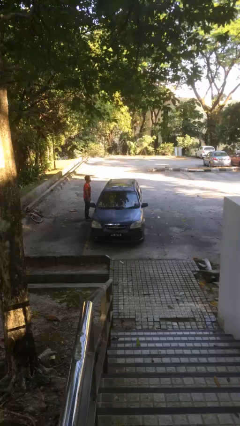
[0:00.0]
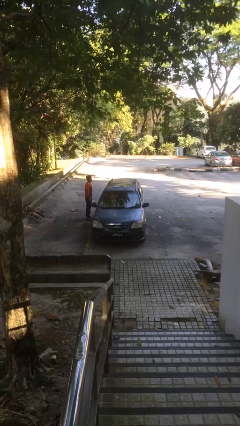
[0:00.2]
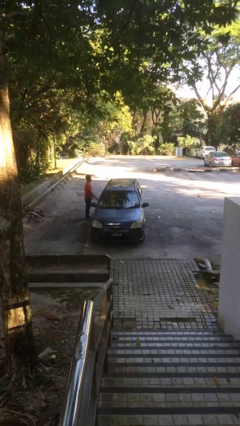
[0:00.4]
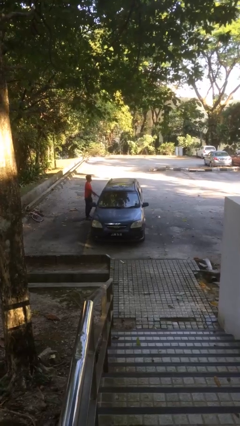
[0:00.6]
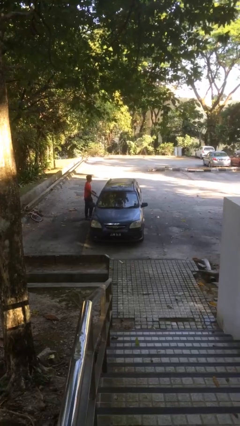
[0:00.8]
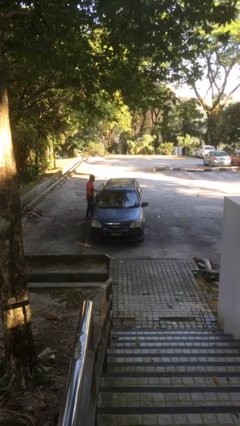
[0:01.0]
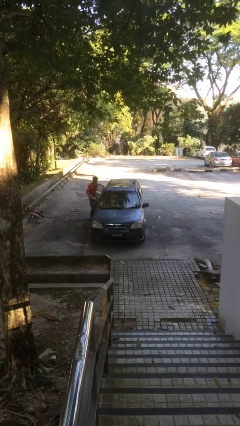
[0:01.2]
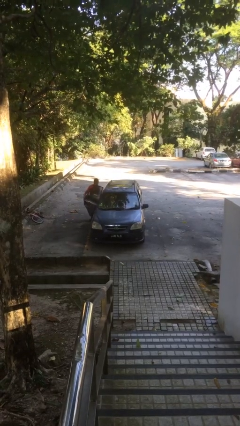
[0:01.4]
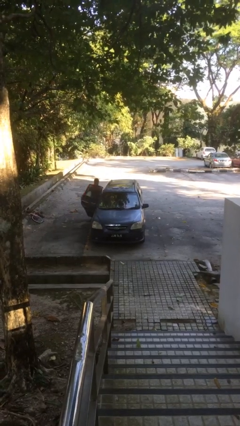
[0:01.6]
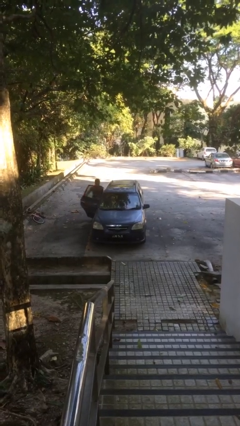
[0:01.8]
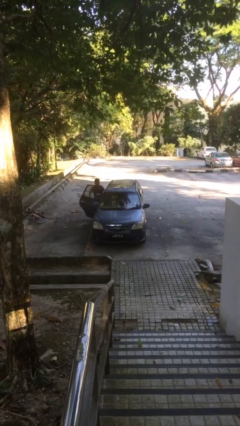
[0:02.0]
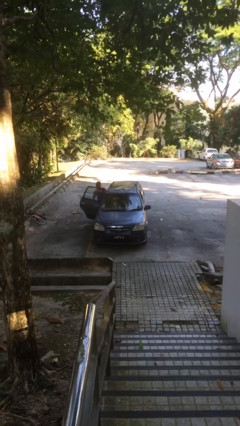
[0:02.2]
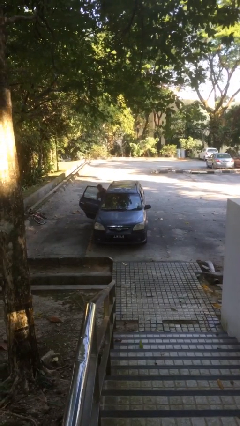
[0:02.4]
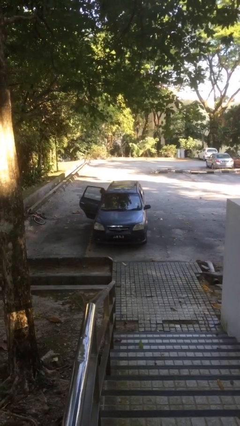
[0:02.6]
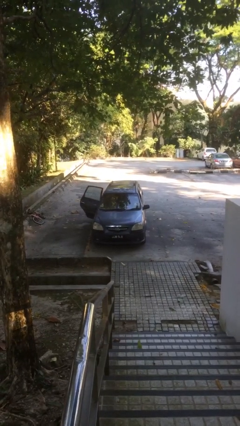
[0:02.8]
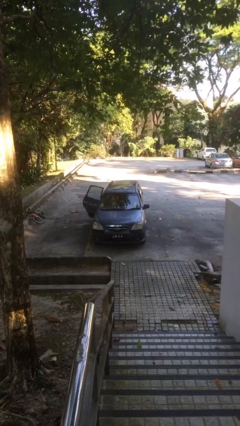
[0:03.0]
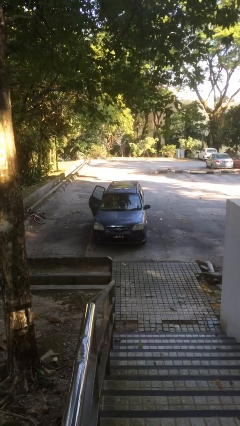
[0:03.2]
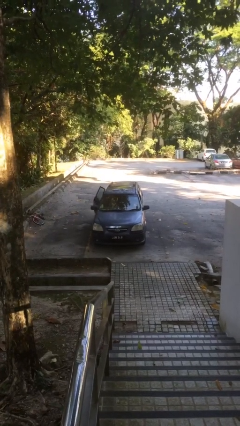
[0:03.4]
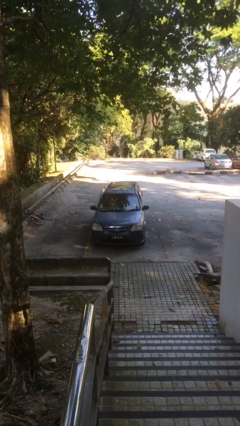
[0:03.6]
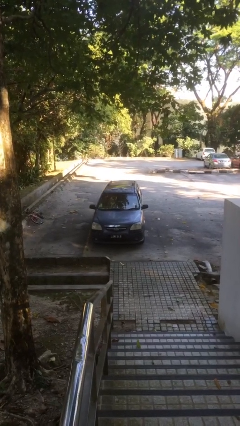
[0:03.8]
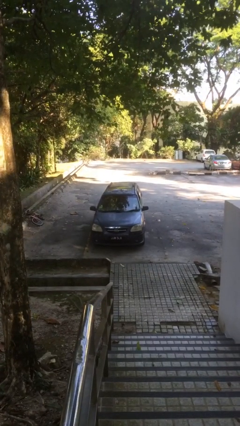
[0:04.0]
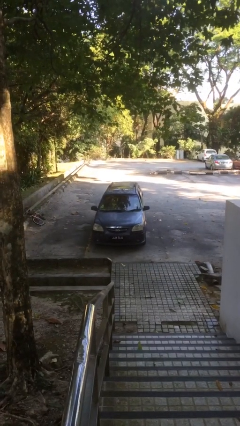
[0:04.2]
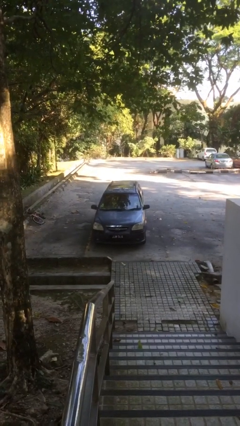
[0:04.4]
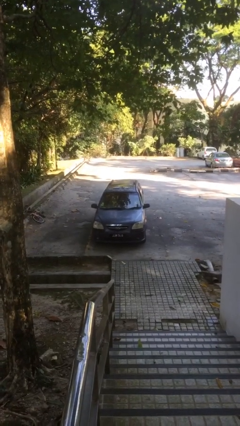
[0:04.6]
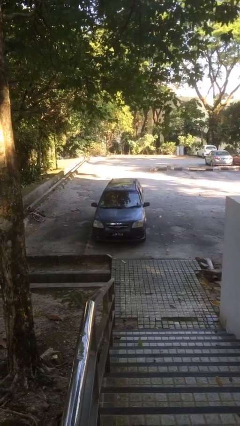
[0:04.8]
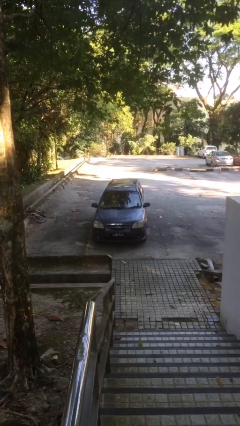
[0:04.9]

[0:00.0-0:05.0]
car picks up person

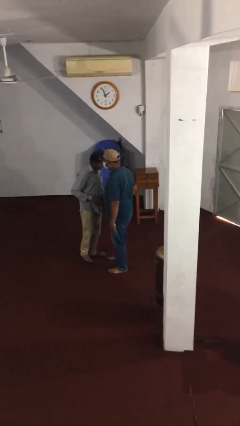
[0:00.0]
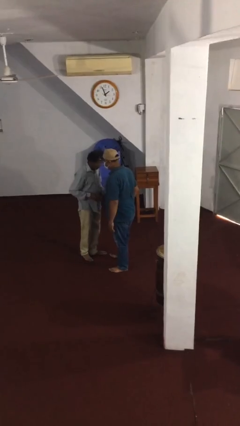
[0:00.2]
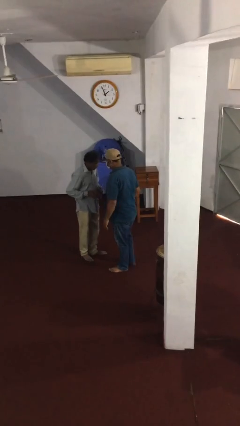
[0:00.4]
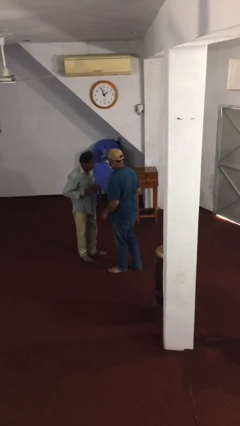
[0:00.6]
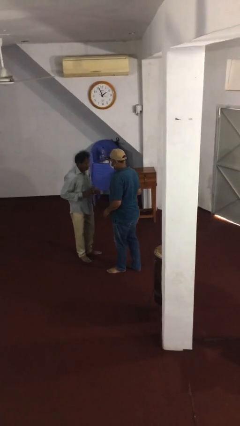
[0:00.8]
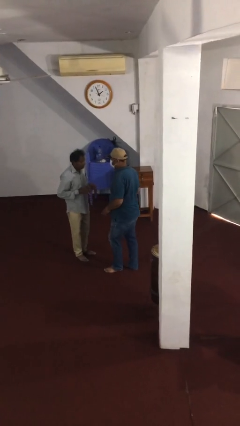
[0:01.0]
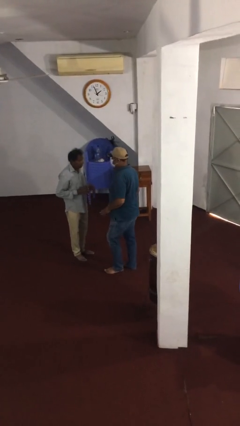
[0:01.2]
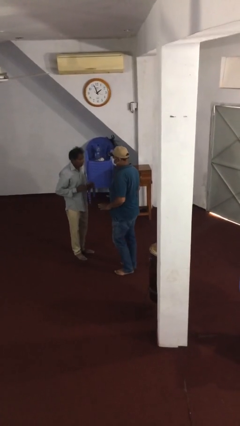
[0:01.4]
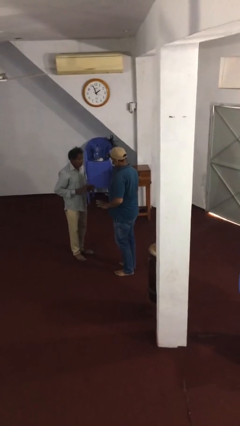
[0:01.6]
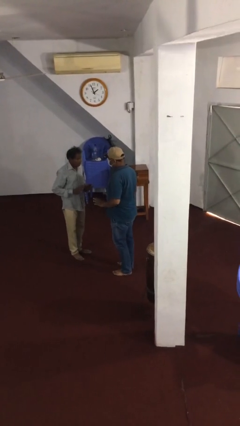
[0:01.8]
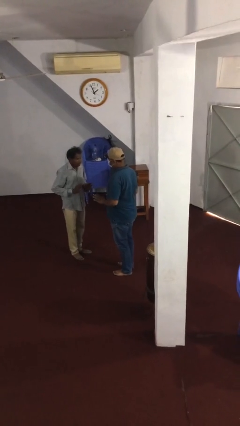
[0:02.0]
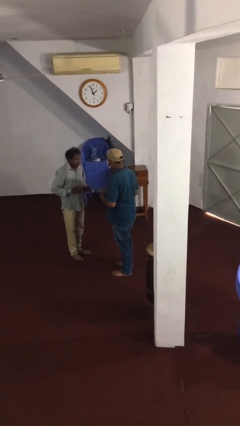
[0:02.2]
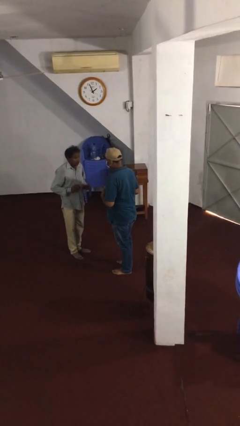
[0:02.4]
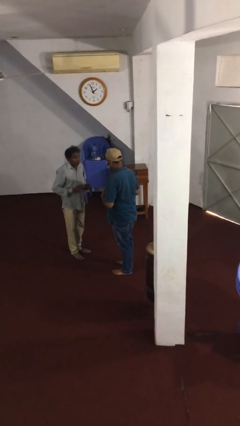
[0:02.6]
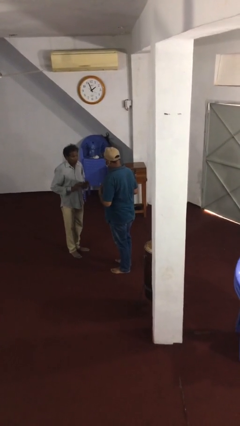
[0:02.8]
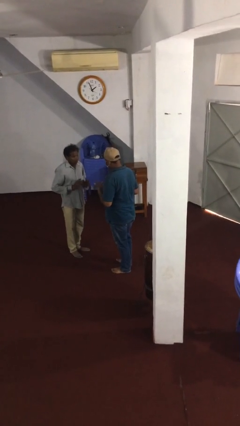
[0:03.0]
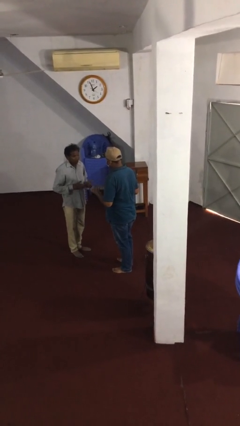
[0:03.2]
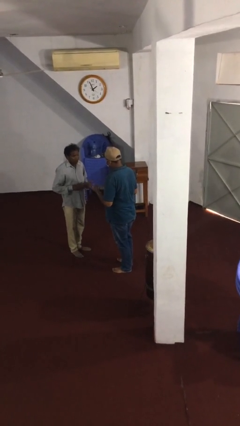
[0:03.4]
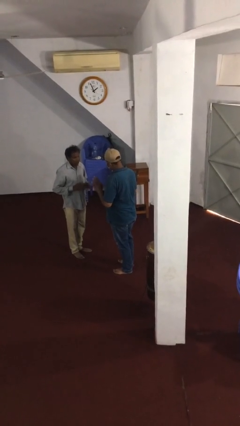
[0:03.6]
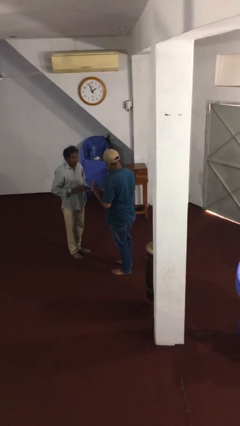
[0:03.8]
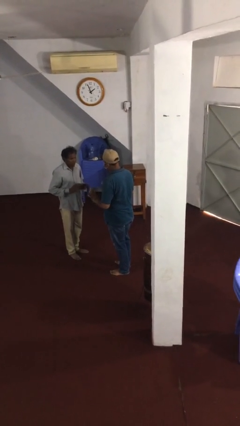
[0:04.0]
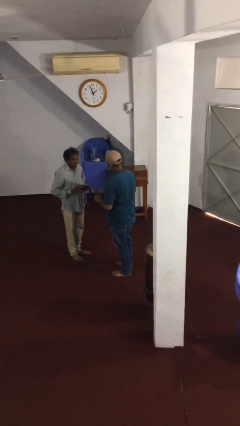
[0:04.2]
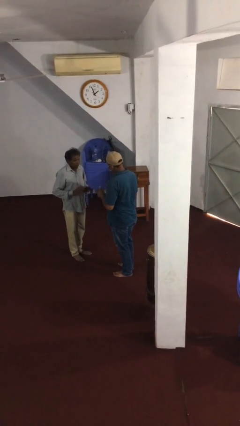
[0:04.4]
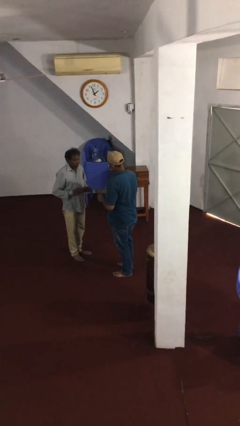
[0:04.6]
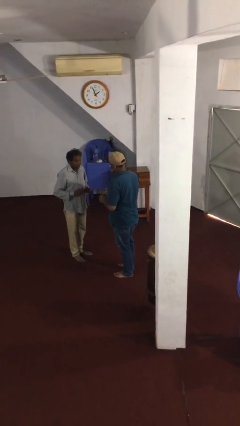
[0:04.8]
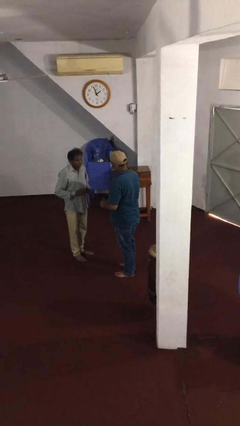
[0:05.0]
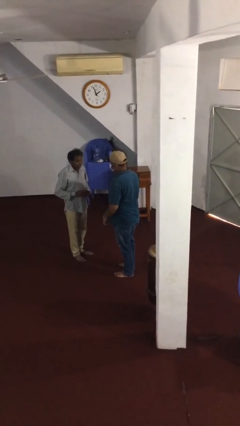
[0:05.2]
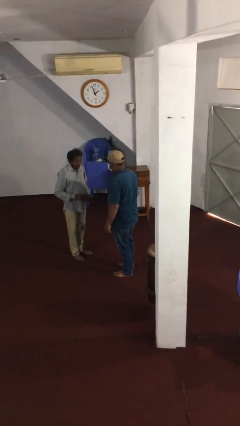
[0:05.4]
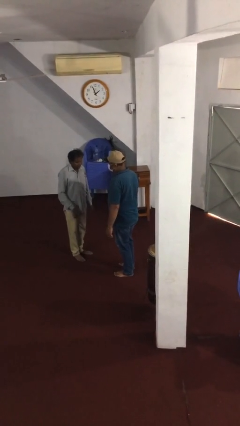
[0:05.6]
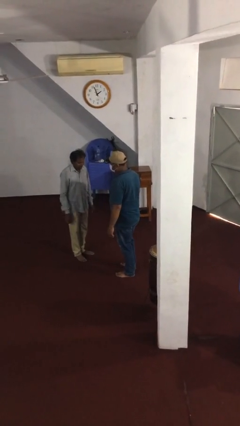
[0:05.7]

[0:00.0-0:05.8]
person talks to person

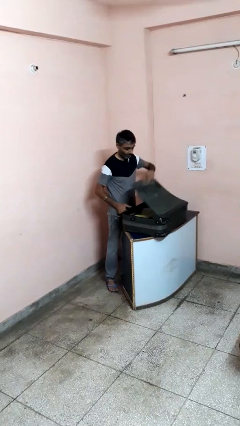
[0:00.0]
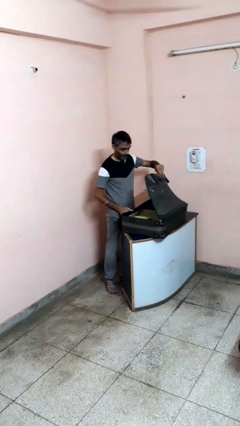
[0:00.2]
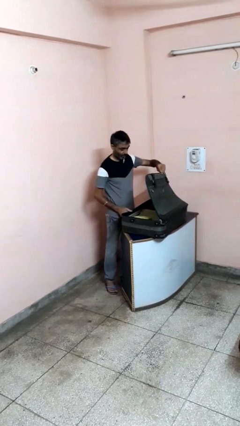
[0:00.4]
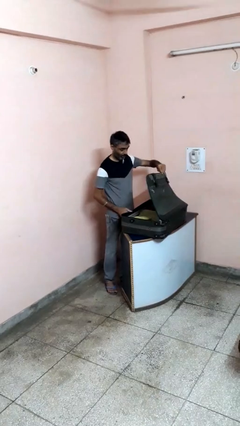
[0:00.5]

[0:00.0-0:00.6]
person opens suitcase

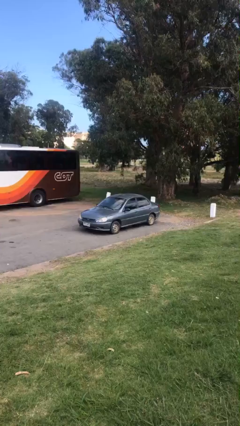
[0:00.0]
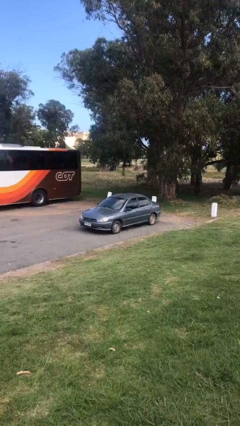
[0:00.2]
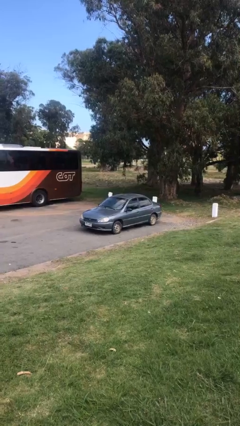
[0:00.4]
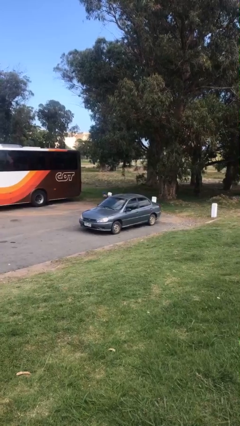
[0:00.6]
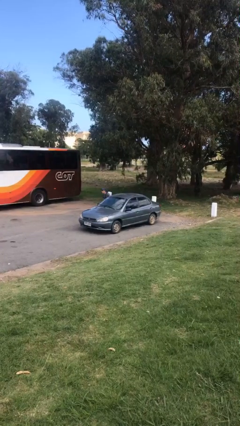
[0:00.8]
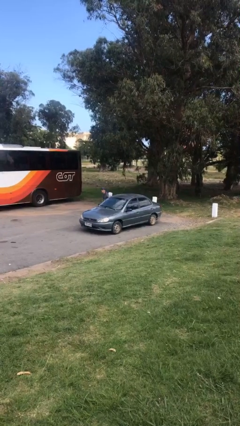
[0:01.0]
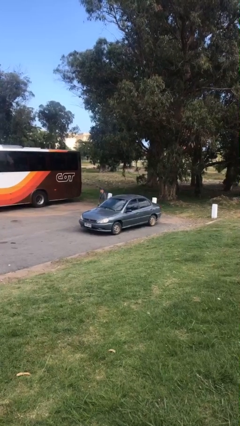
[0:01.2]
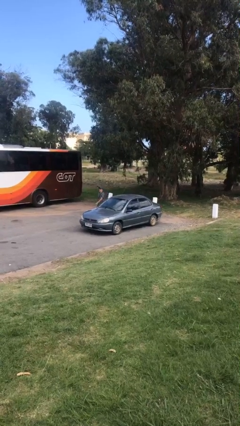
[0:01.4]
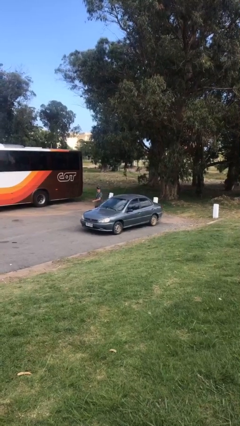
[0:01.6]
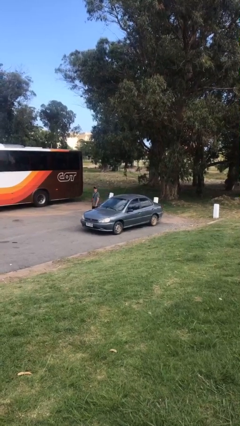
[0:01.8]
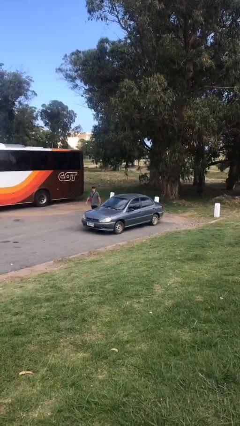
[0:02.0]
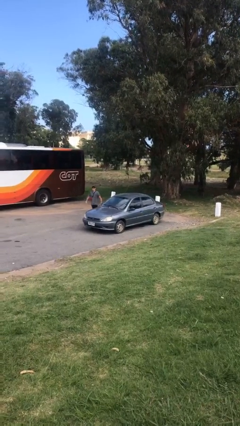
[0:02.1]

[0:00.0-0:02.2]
car drops off person

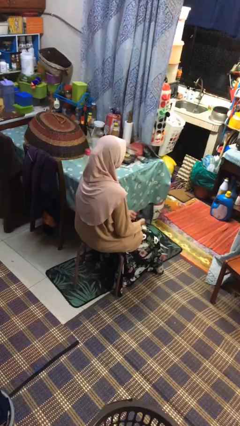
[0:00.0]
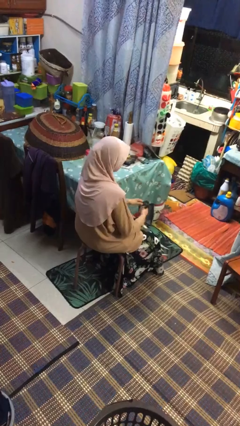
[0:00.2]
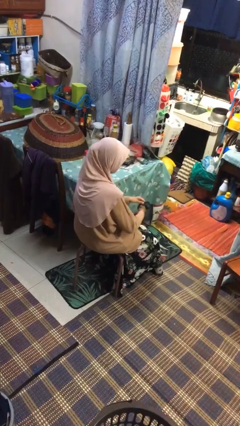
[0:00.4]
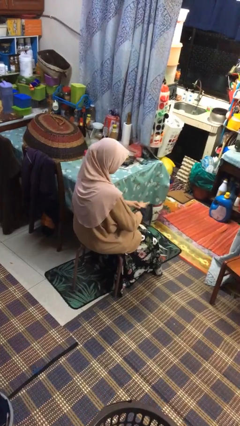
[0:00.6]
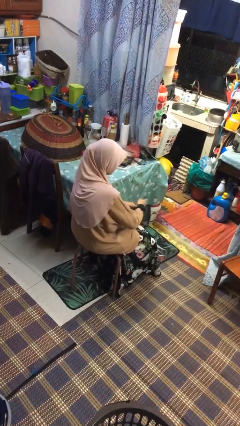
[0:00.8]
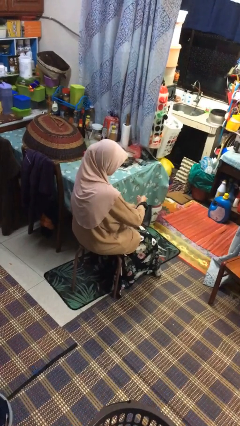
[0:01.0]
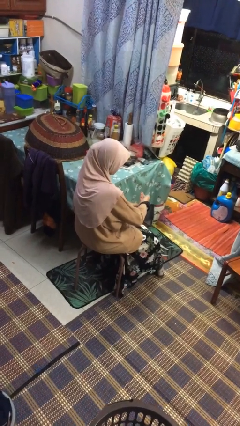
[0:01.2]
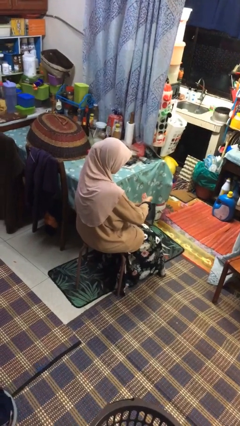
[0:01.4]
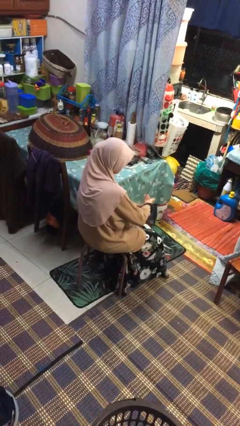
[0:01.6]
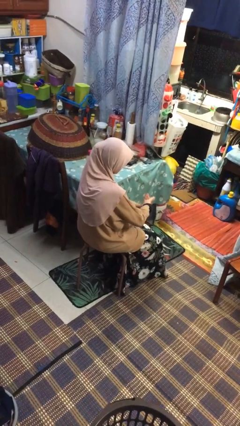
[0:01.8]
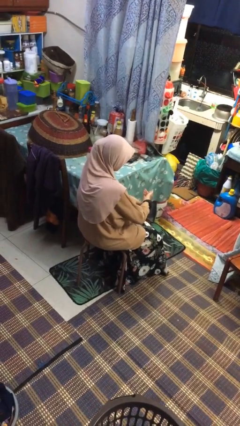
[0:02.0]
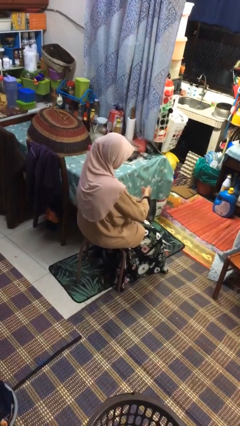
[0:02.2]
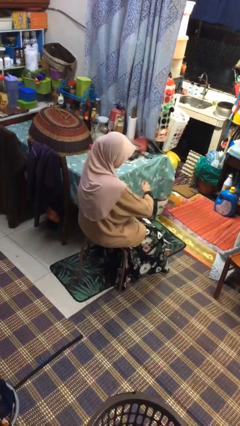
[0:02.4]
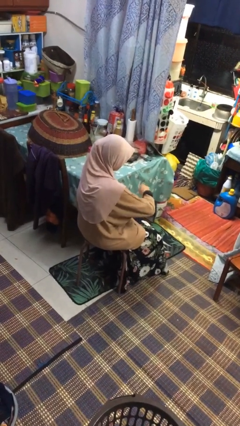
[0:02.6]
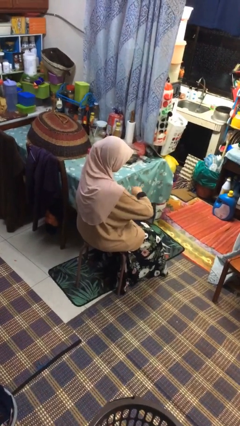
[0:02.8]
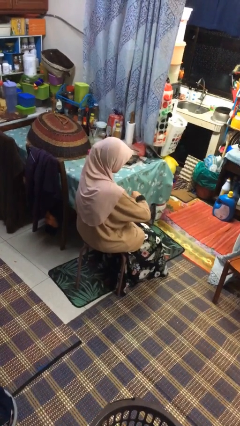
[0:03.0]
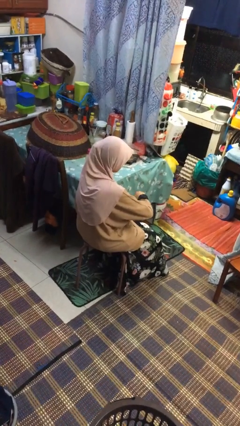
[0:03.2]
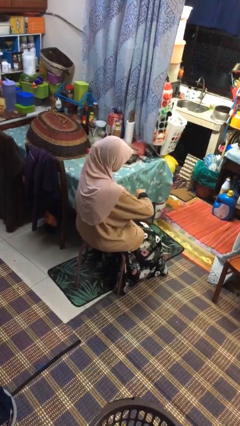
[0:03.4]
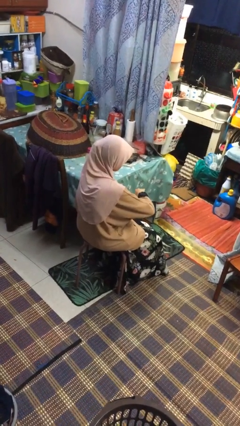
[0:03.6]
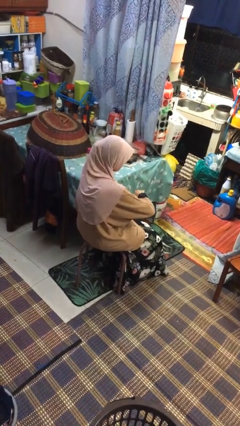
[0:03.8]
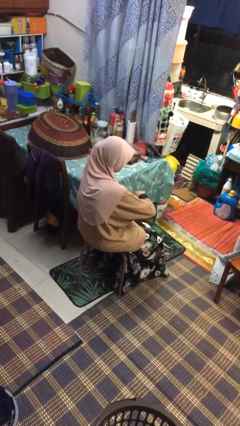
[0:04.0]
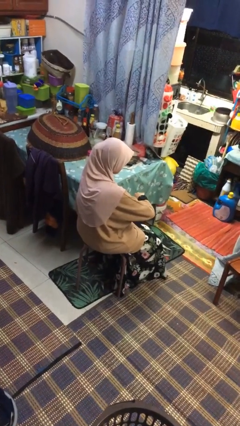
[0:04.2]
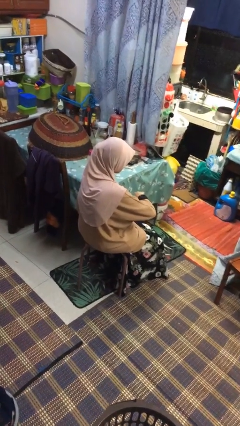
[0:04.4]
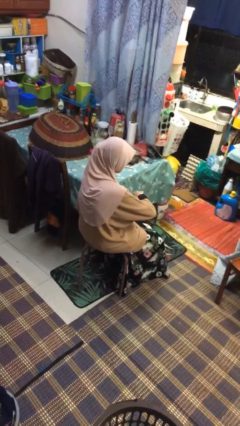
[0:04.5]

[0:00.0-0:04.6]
person puts on wristwatch
